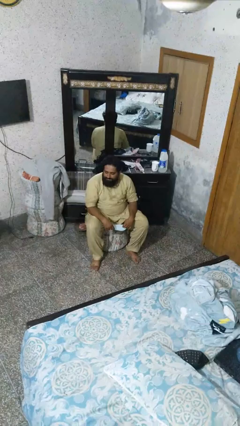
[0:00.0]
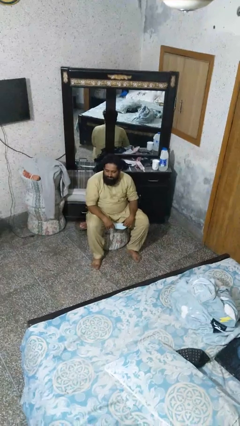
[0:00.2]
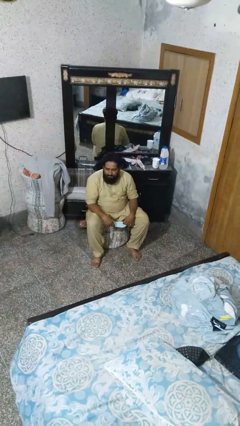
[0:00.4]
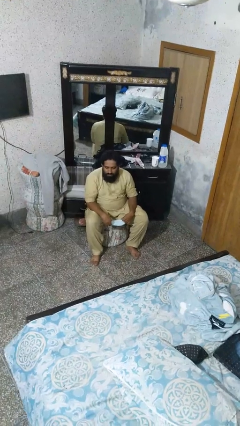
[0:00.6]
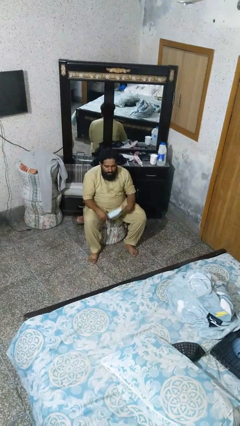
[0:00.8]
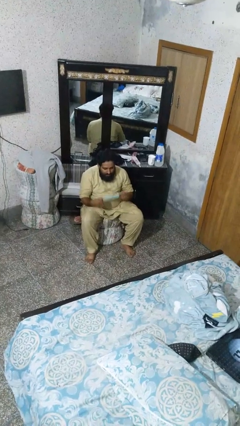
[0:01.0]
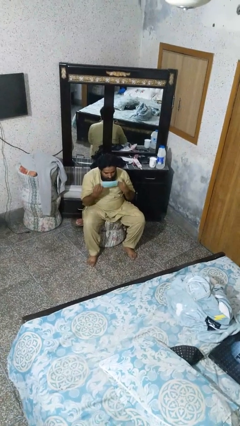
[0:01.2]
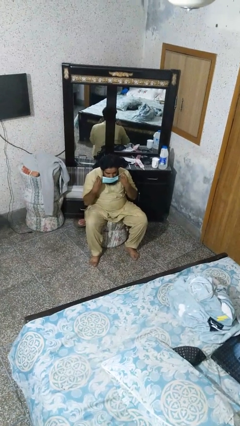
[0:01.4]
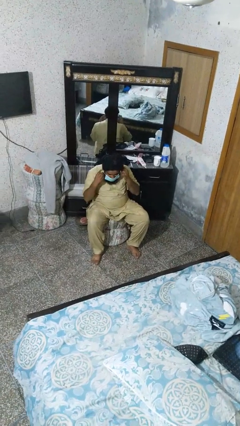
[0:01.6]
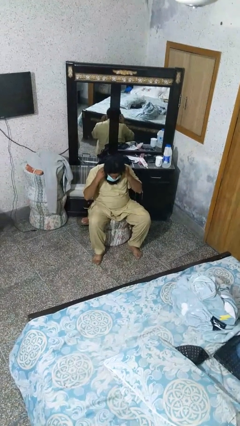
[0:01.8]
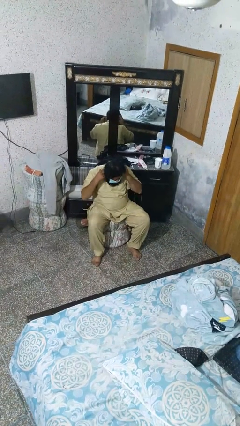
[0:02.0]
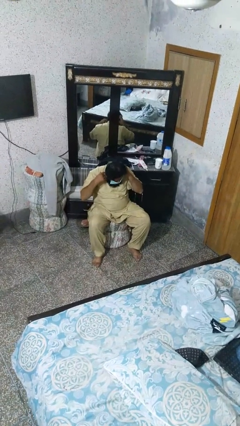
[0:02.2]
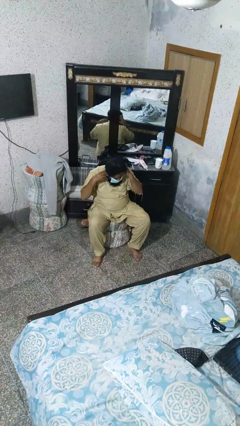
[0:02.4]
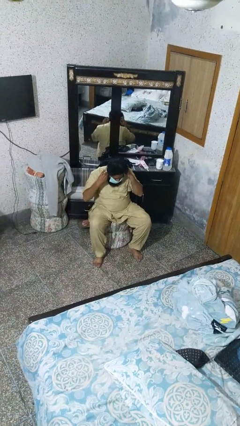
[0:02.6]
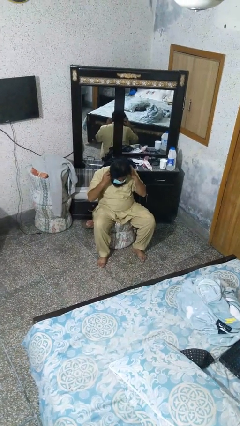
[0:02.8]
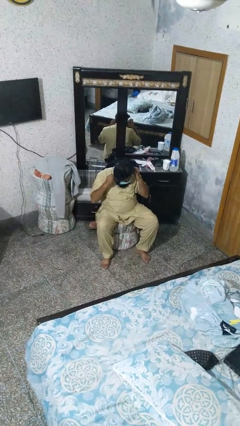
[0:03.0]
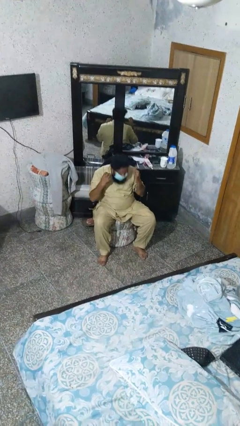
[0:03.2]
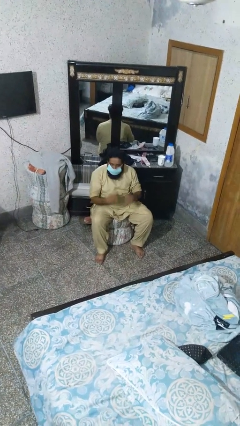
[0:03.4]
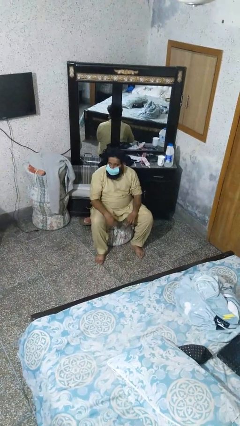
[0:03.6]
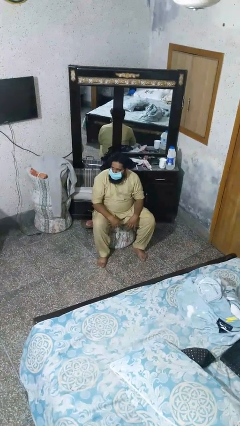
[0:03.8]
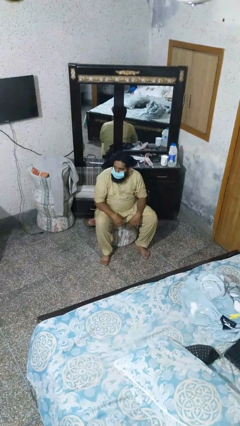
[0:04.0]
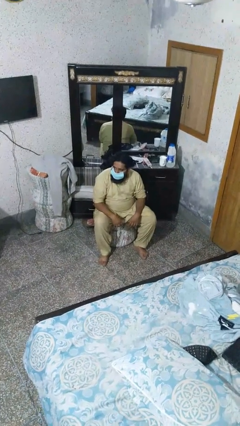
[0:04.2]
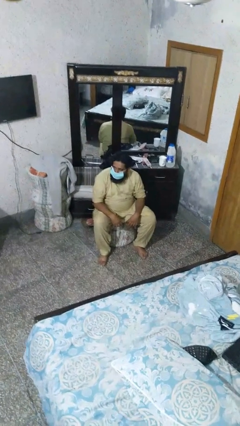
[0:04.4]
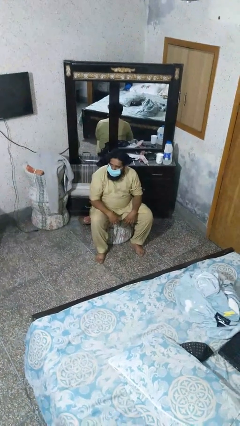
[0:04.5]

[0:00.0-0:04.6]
person puts on facemask

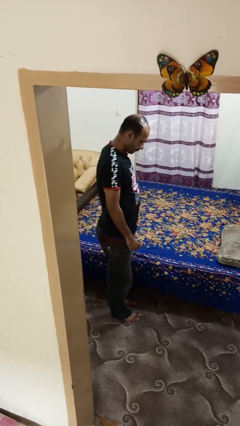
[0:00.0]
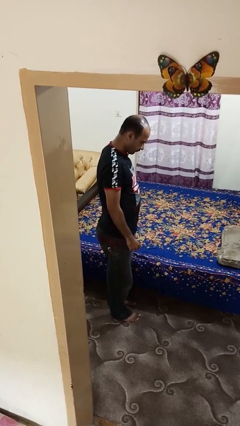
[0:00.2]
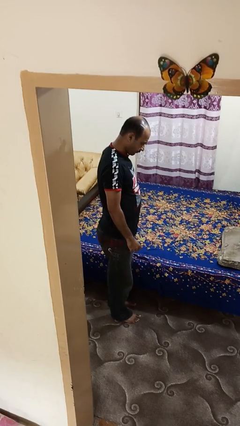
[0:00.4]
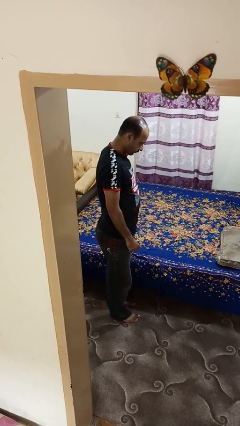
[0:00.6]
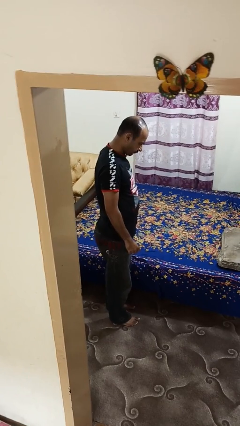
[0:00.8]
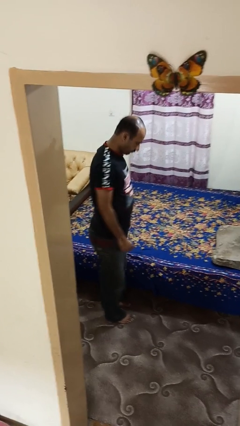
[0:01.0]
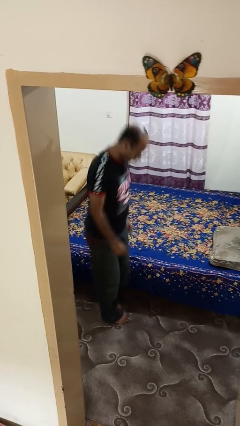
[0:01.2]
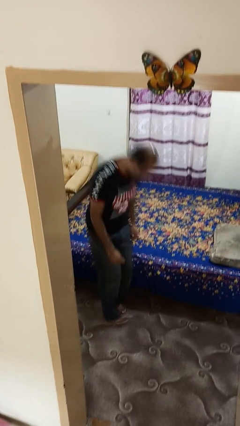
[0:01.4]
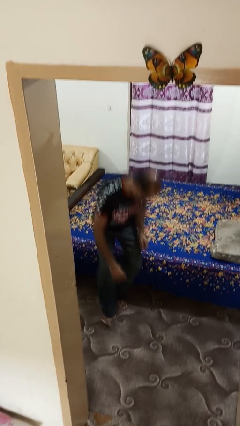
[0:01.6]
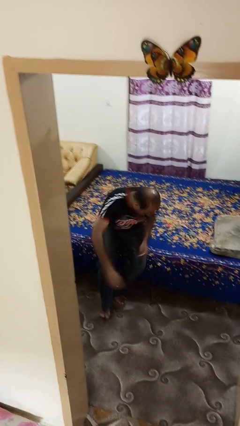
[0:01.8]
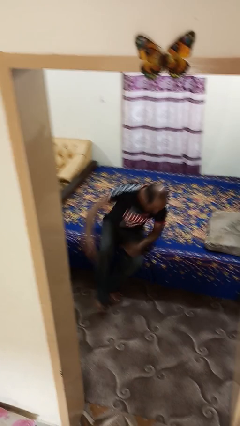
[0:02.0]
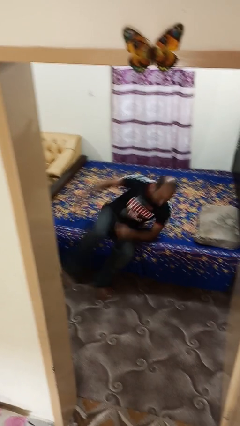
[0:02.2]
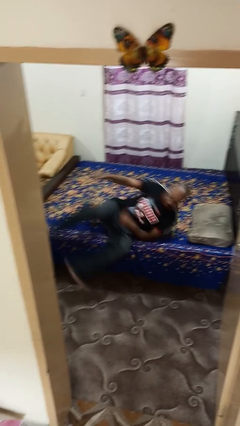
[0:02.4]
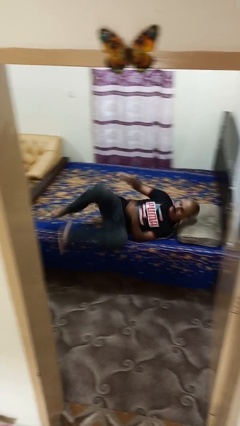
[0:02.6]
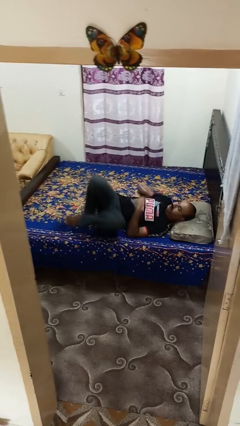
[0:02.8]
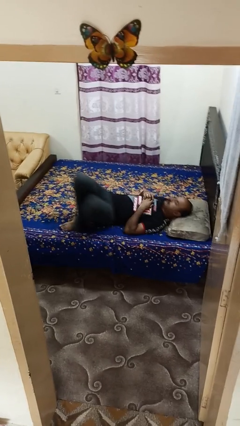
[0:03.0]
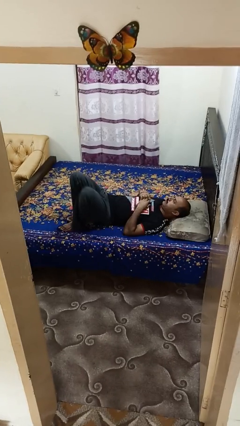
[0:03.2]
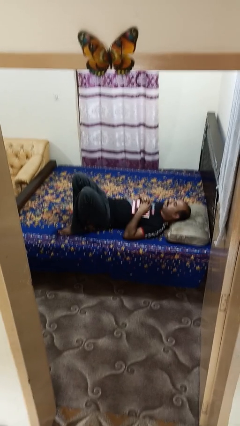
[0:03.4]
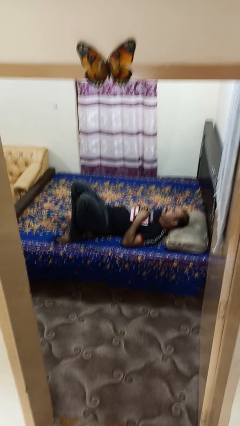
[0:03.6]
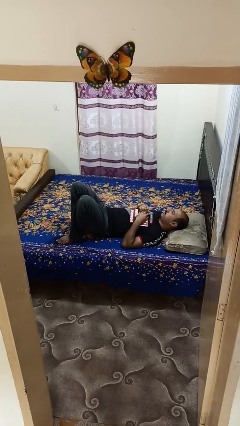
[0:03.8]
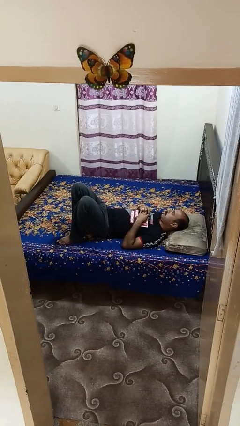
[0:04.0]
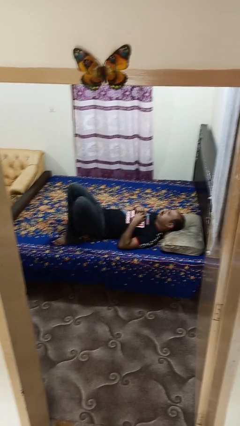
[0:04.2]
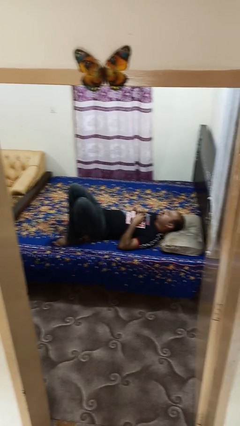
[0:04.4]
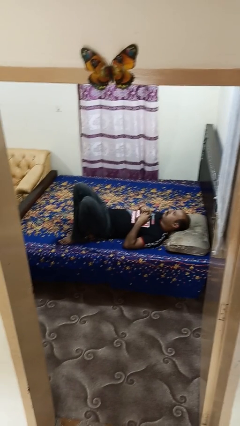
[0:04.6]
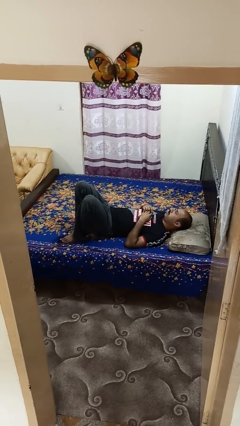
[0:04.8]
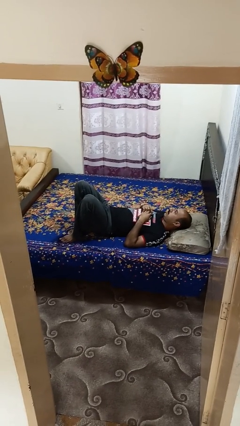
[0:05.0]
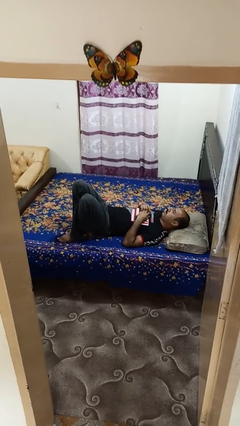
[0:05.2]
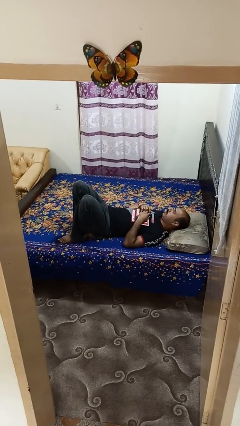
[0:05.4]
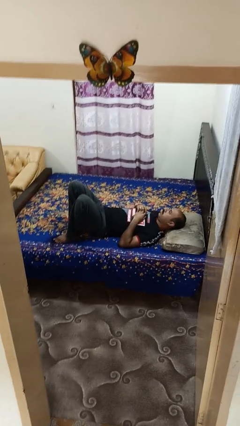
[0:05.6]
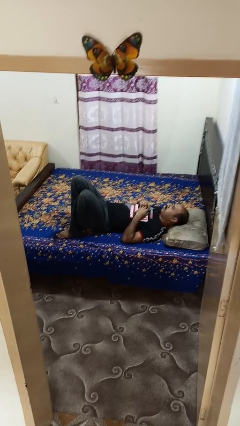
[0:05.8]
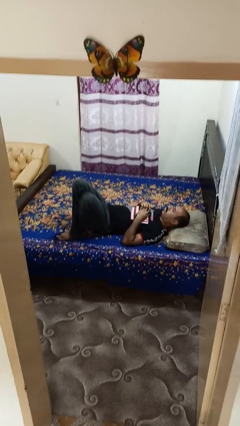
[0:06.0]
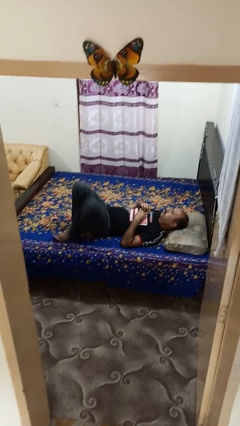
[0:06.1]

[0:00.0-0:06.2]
person lies down on bed

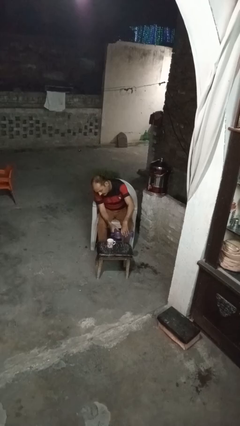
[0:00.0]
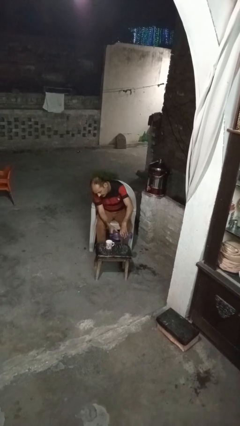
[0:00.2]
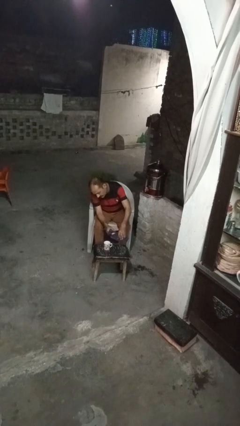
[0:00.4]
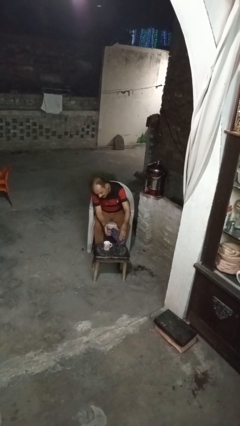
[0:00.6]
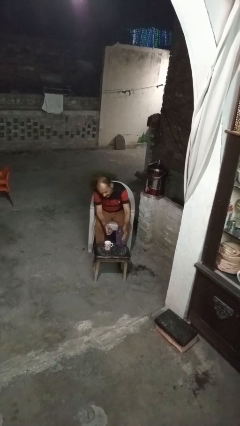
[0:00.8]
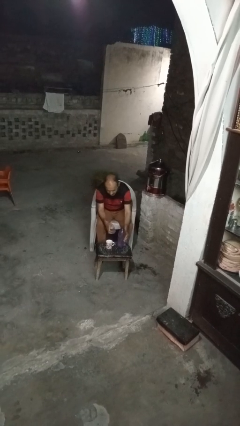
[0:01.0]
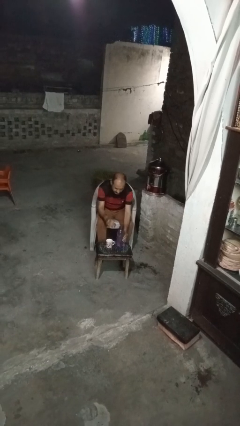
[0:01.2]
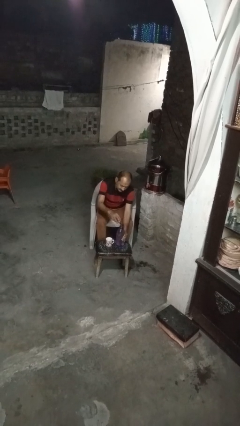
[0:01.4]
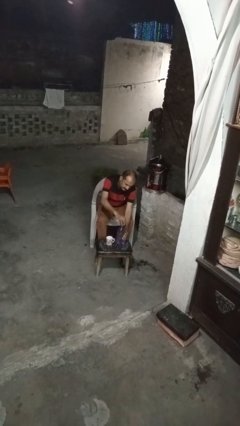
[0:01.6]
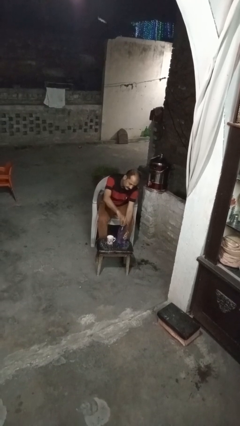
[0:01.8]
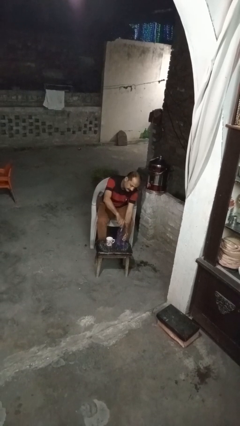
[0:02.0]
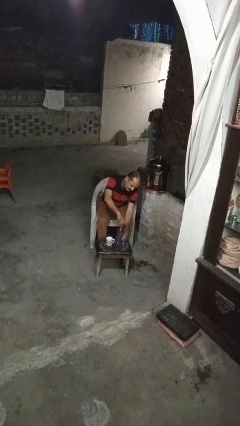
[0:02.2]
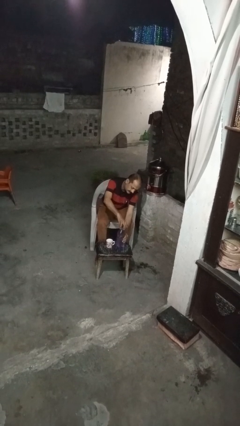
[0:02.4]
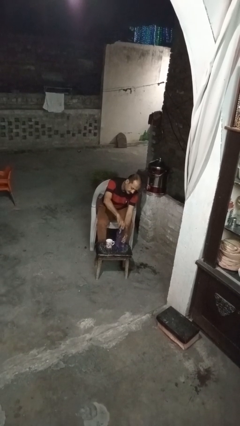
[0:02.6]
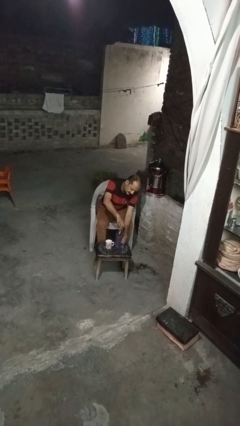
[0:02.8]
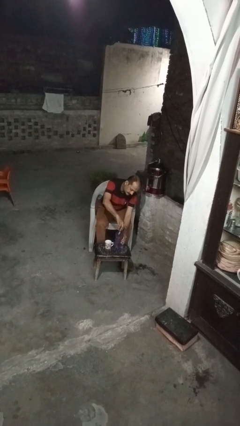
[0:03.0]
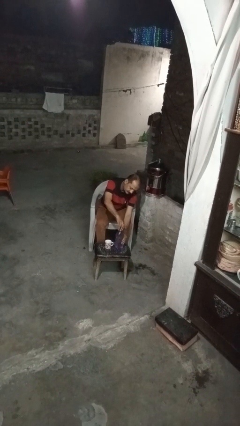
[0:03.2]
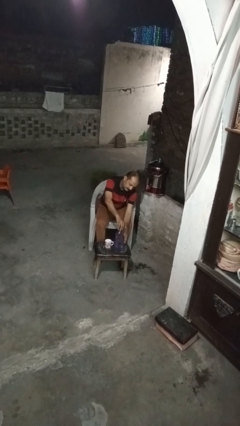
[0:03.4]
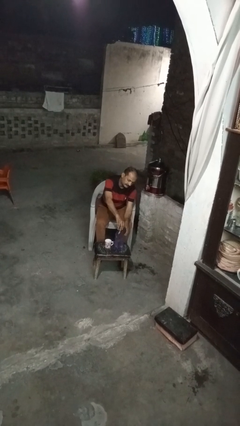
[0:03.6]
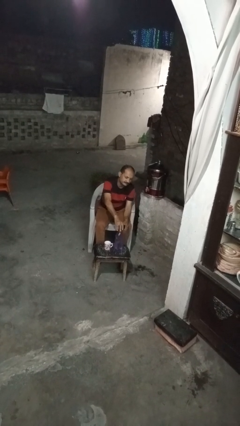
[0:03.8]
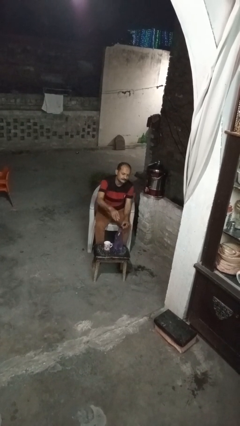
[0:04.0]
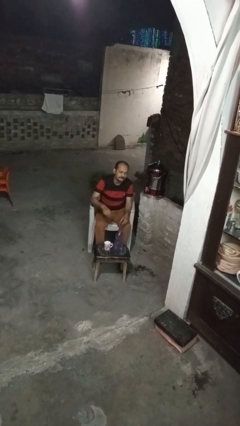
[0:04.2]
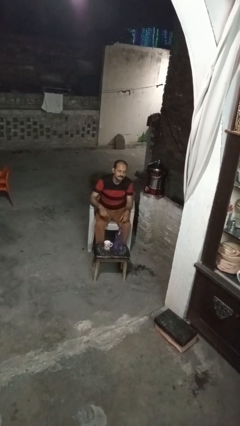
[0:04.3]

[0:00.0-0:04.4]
person screws lid to bottle

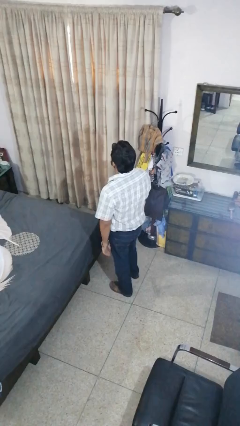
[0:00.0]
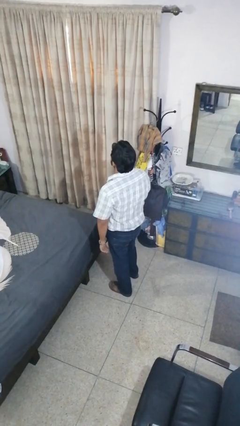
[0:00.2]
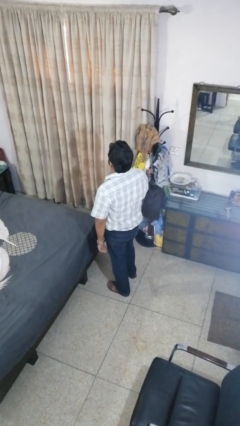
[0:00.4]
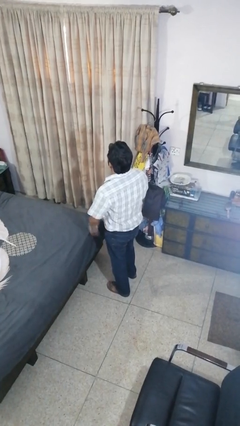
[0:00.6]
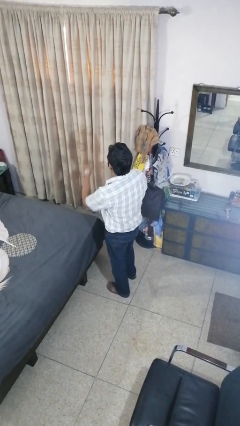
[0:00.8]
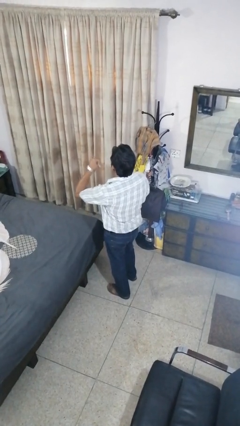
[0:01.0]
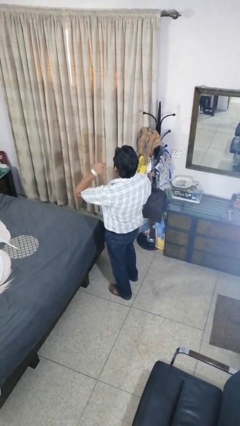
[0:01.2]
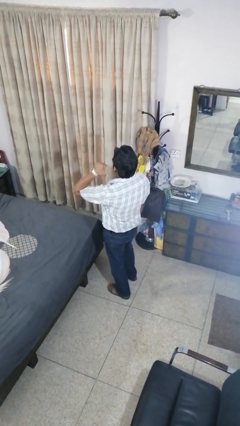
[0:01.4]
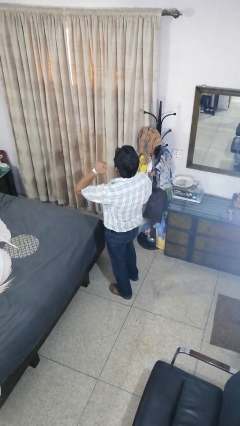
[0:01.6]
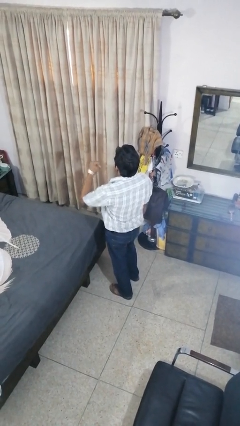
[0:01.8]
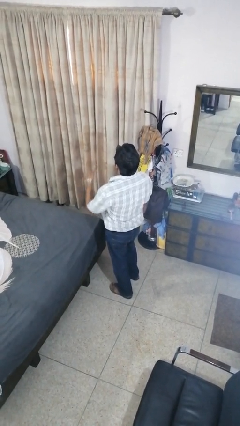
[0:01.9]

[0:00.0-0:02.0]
person gestures behind me

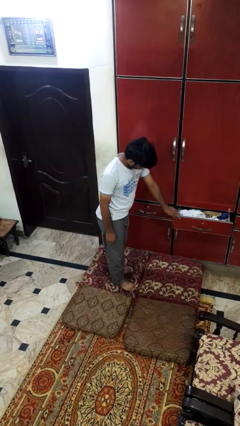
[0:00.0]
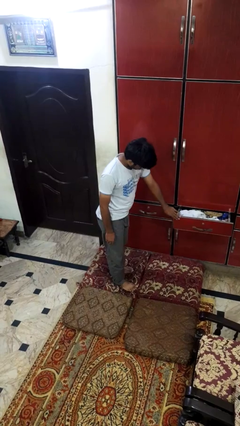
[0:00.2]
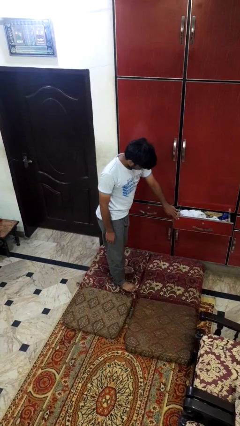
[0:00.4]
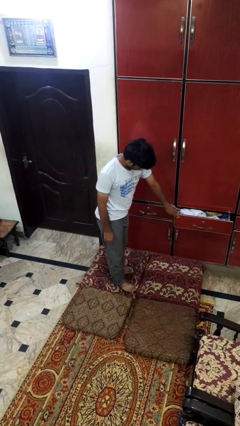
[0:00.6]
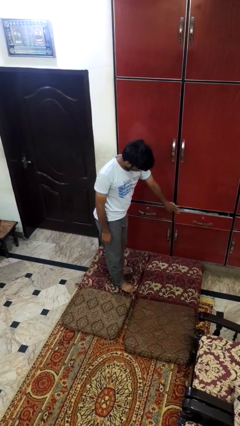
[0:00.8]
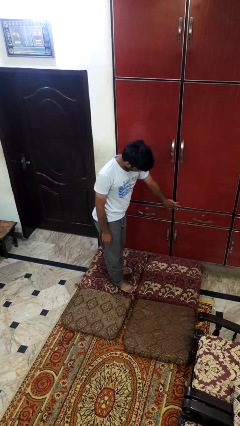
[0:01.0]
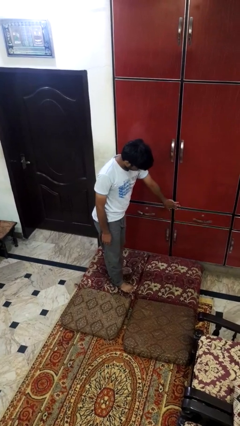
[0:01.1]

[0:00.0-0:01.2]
person closes dresser drawer
